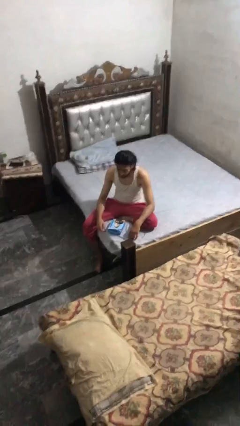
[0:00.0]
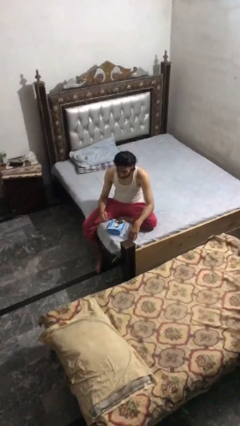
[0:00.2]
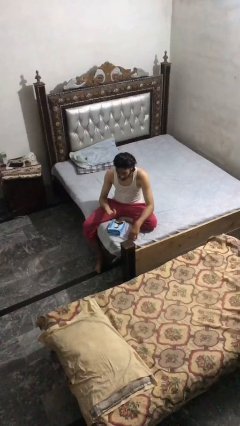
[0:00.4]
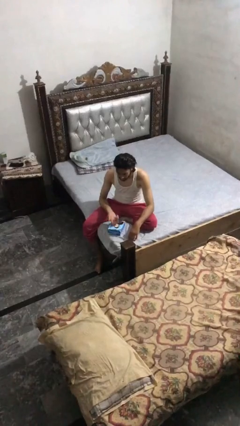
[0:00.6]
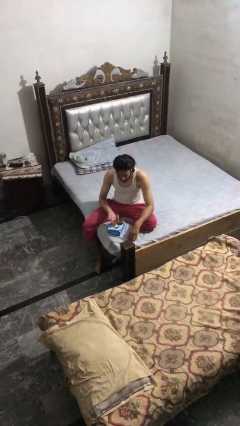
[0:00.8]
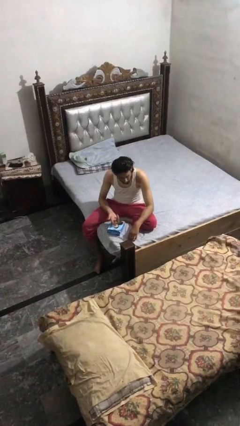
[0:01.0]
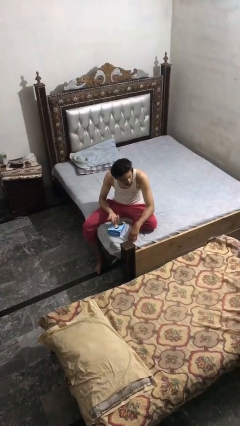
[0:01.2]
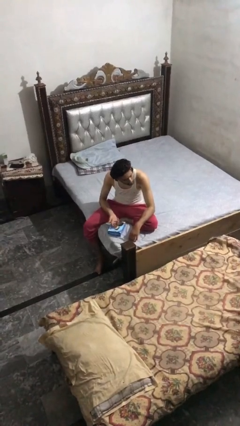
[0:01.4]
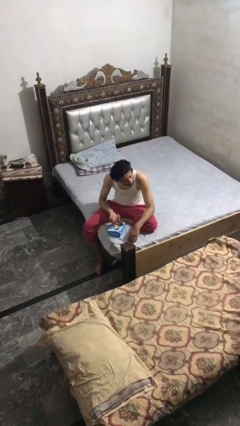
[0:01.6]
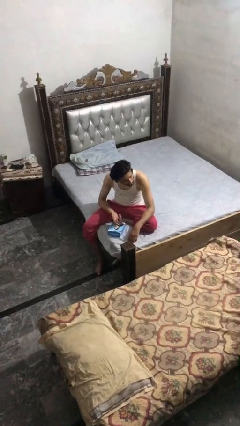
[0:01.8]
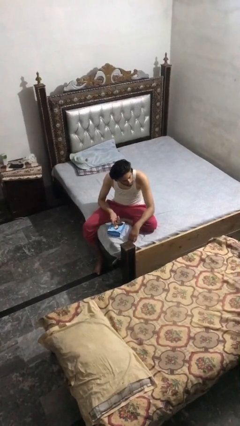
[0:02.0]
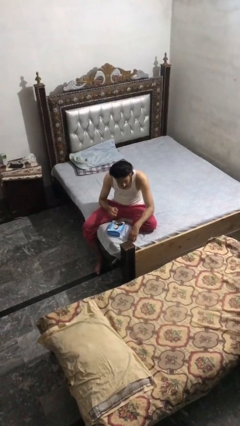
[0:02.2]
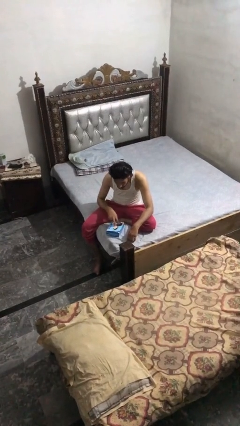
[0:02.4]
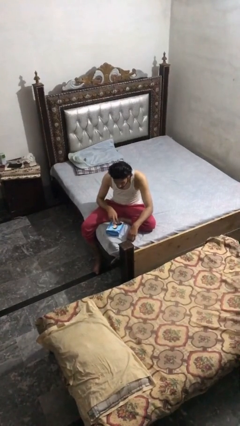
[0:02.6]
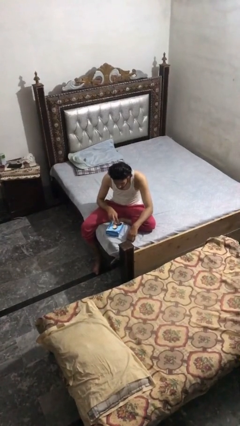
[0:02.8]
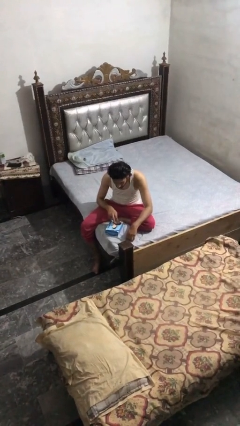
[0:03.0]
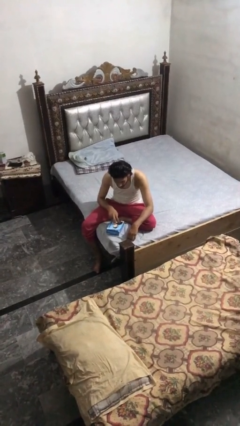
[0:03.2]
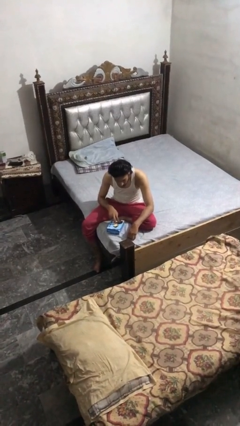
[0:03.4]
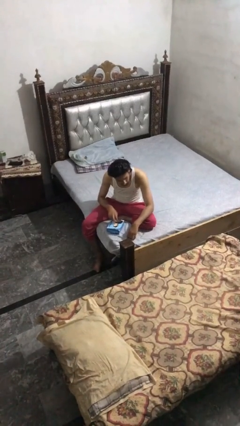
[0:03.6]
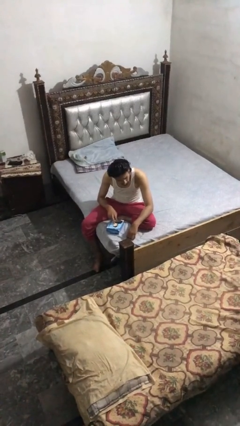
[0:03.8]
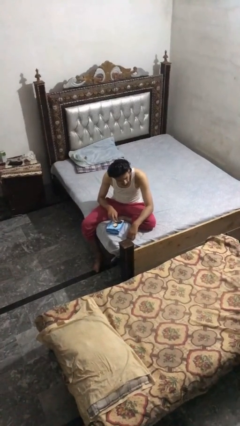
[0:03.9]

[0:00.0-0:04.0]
person taps object with finger

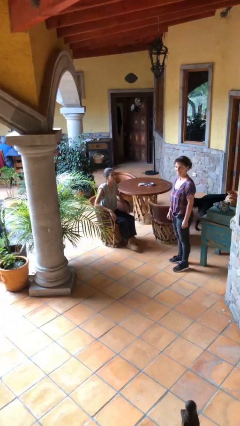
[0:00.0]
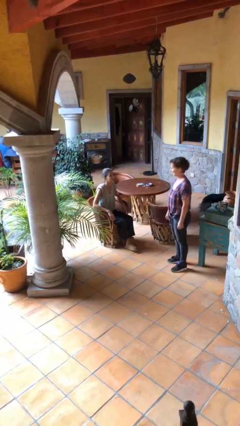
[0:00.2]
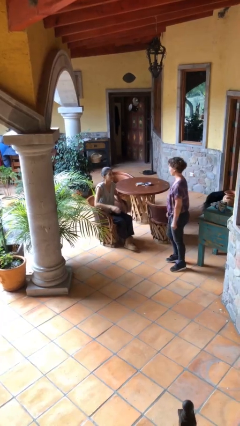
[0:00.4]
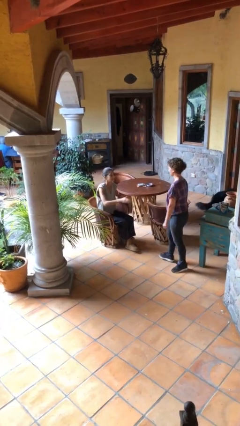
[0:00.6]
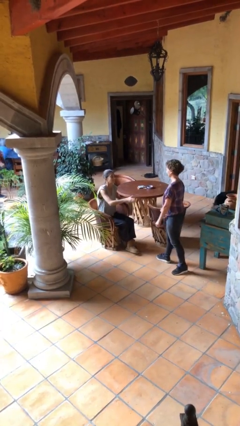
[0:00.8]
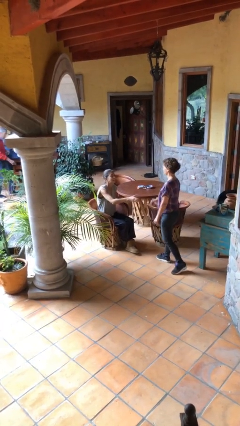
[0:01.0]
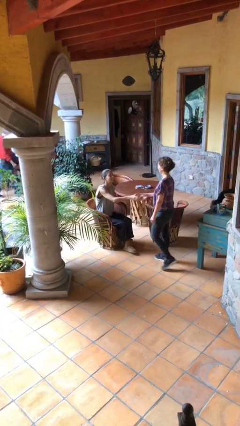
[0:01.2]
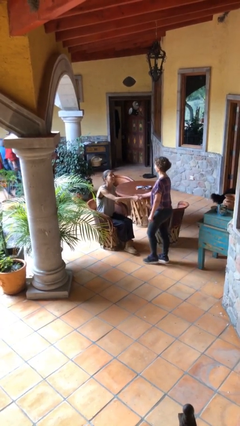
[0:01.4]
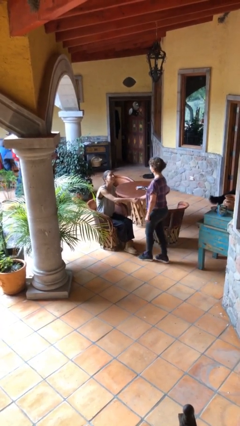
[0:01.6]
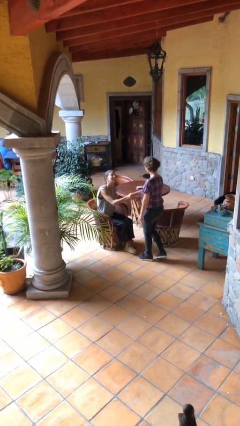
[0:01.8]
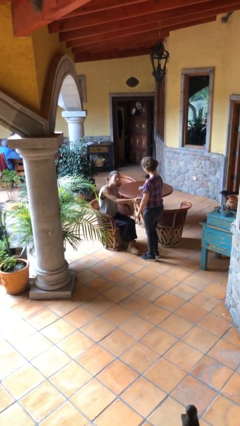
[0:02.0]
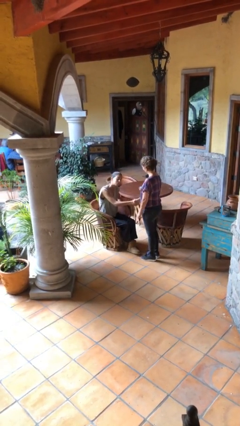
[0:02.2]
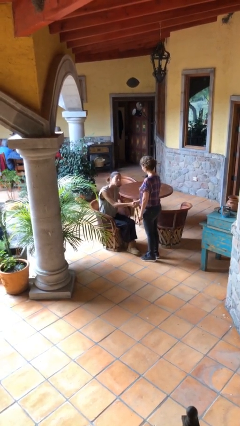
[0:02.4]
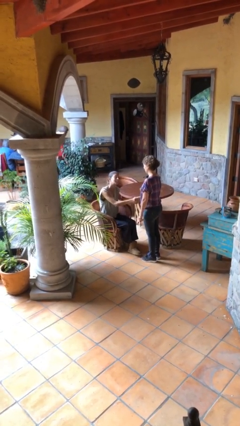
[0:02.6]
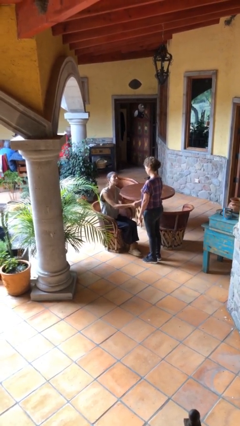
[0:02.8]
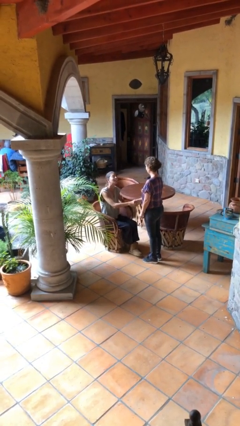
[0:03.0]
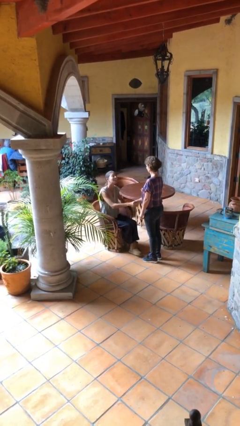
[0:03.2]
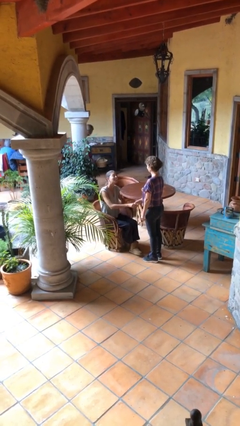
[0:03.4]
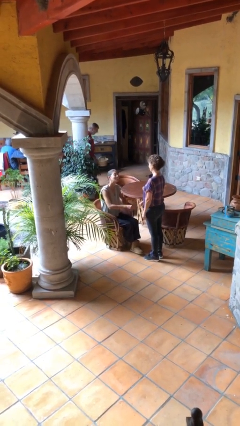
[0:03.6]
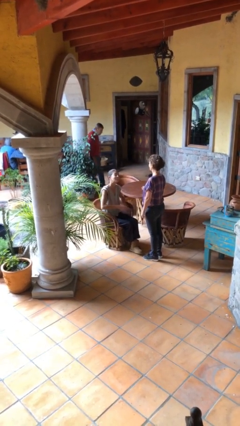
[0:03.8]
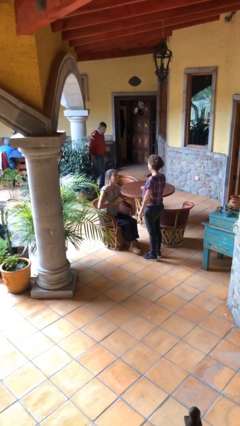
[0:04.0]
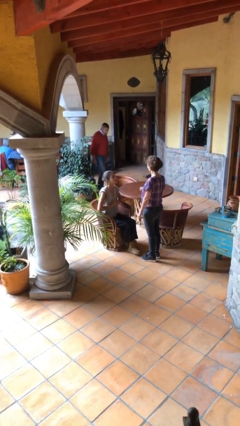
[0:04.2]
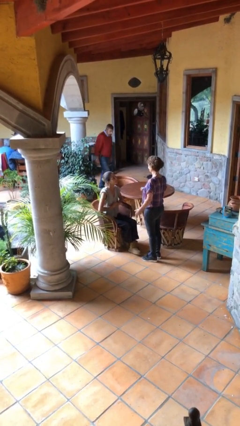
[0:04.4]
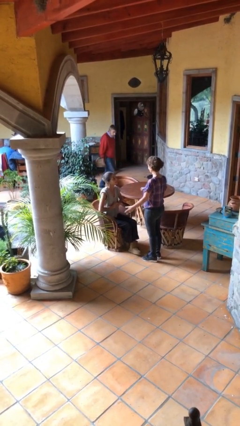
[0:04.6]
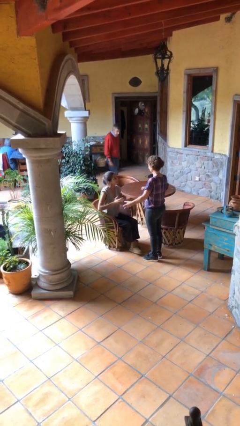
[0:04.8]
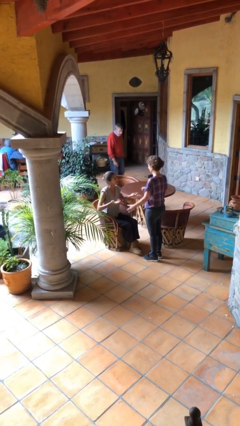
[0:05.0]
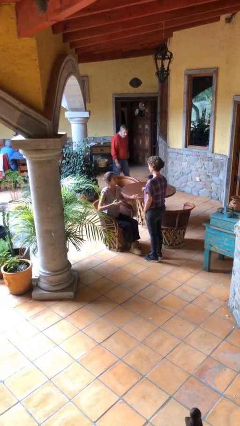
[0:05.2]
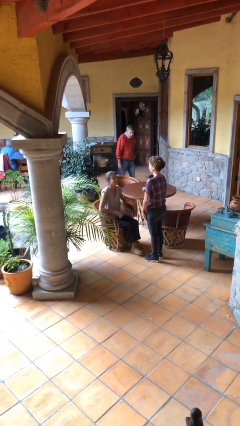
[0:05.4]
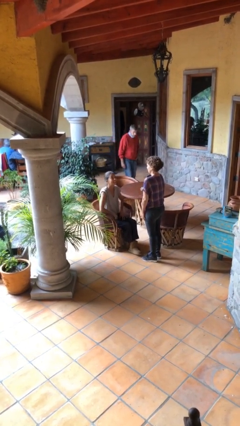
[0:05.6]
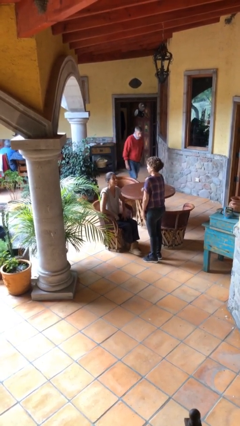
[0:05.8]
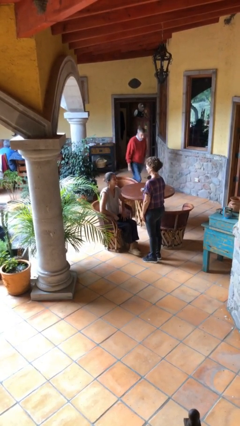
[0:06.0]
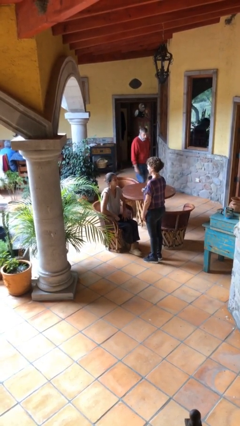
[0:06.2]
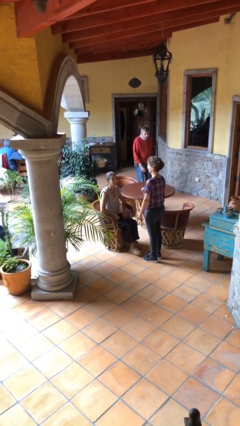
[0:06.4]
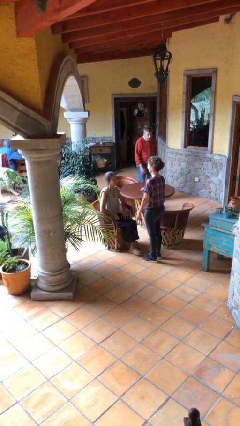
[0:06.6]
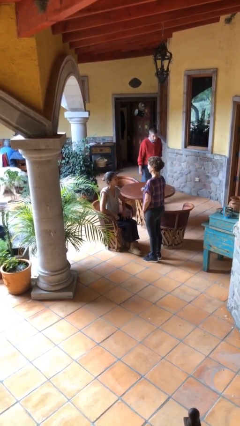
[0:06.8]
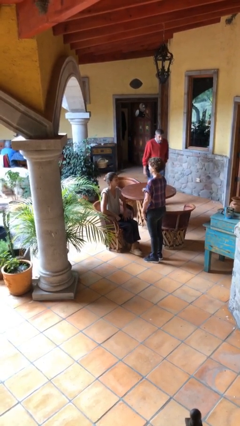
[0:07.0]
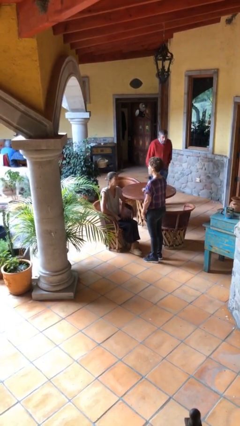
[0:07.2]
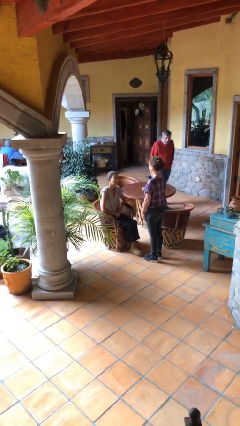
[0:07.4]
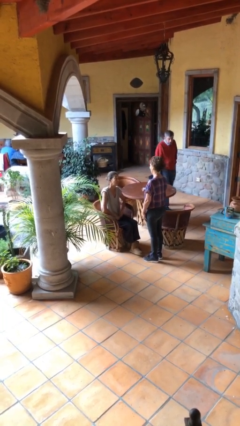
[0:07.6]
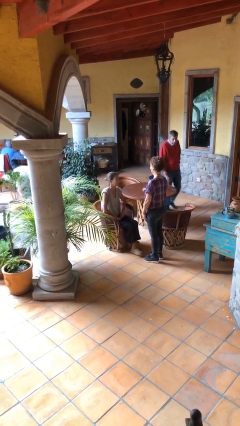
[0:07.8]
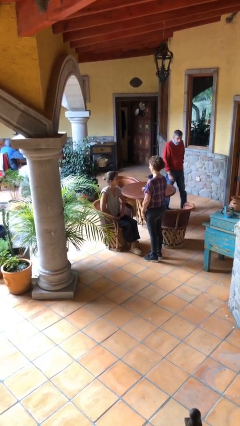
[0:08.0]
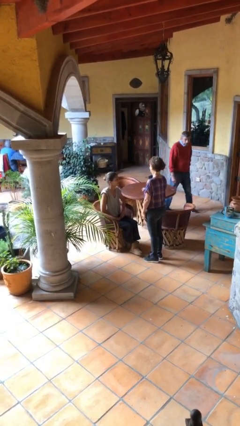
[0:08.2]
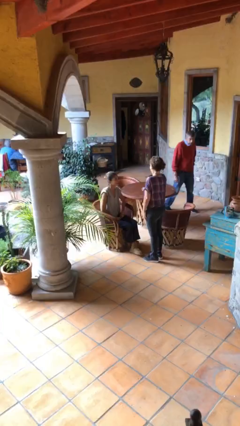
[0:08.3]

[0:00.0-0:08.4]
person shakes hand

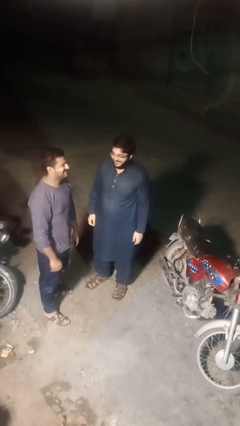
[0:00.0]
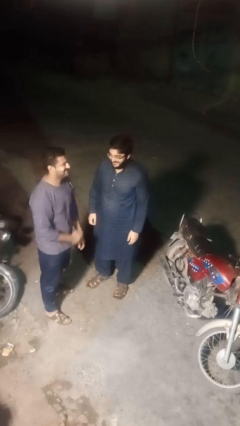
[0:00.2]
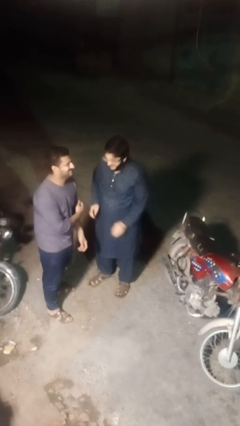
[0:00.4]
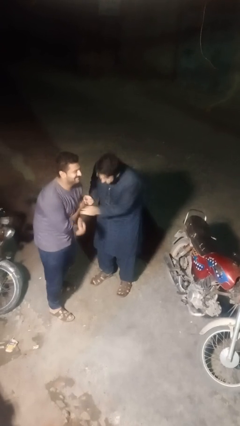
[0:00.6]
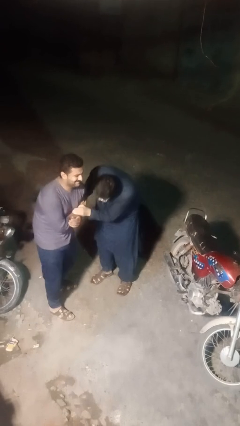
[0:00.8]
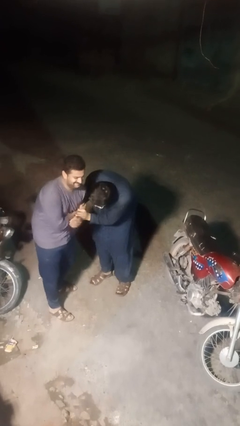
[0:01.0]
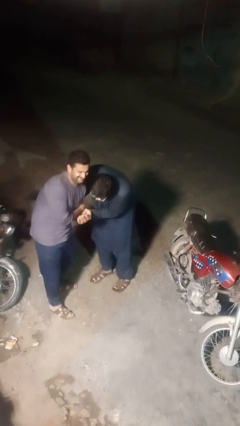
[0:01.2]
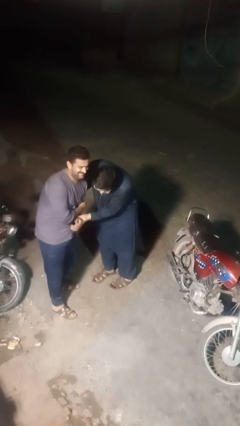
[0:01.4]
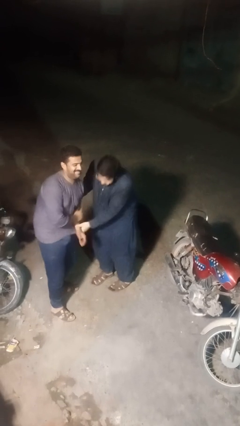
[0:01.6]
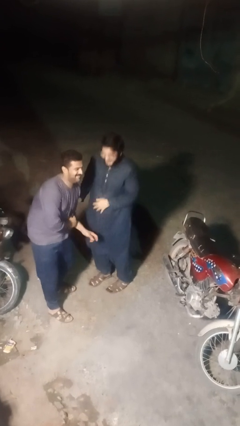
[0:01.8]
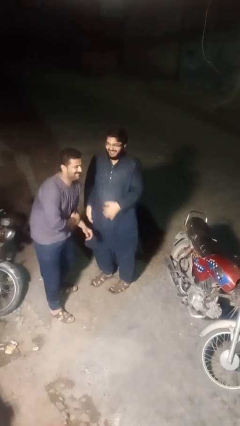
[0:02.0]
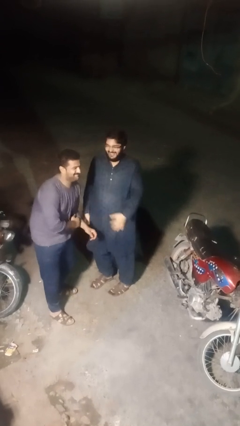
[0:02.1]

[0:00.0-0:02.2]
person tickles person

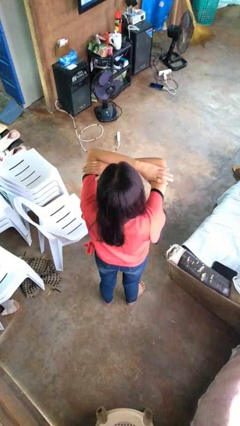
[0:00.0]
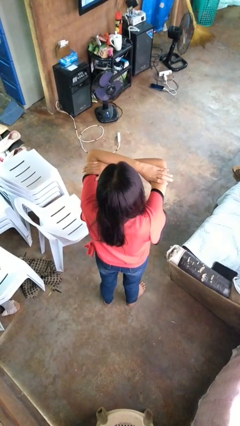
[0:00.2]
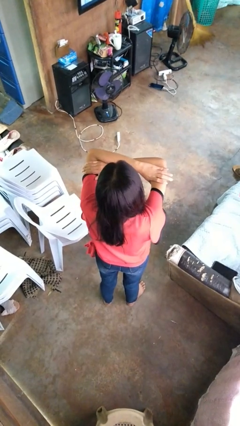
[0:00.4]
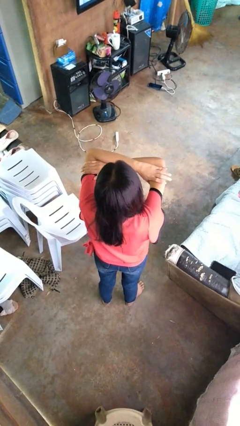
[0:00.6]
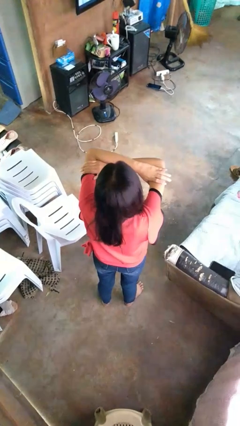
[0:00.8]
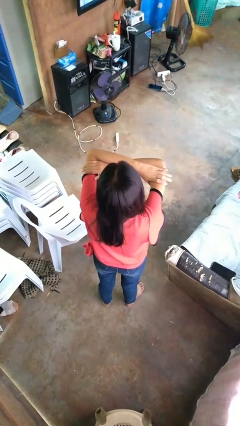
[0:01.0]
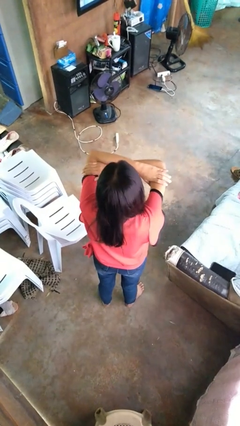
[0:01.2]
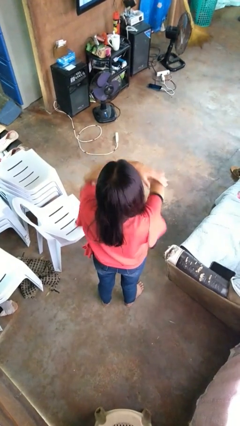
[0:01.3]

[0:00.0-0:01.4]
person gestures arms x

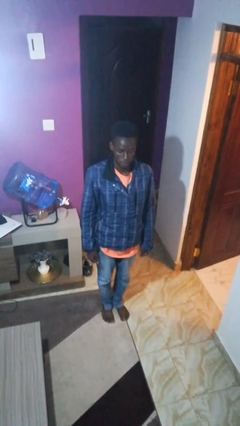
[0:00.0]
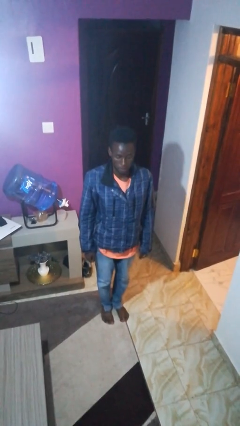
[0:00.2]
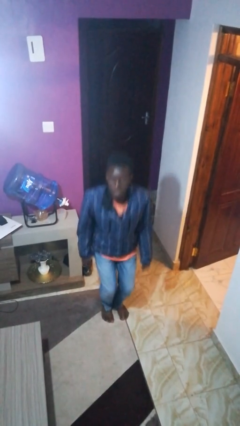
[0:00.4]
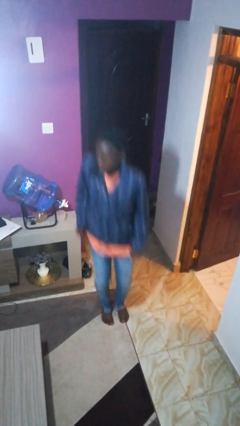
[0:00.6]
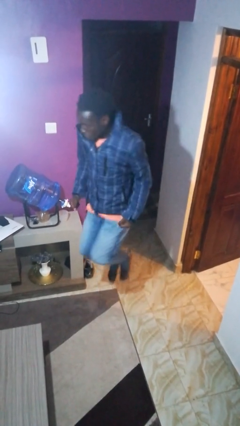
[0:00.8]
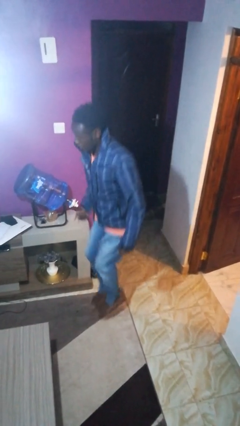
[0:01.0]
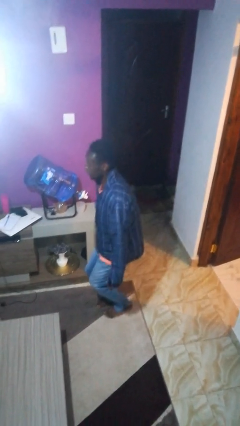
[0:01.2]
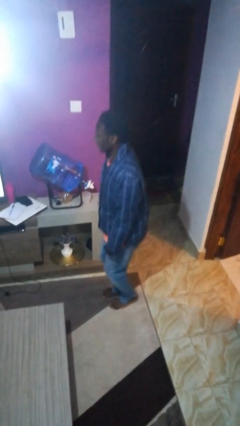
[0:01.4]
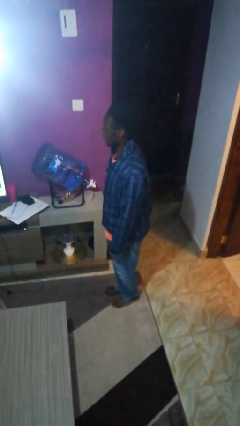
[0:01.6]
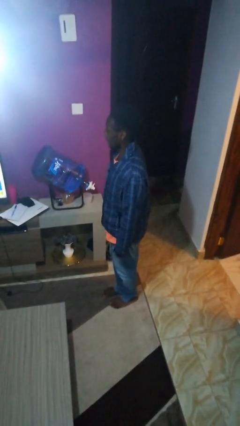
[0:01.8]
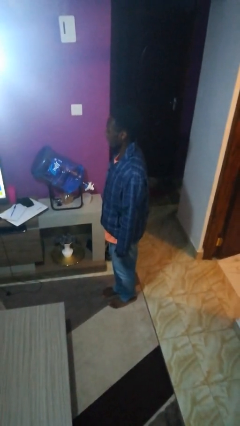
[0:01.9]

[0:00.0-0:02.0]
person jumps
